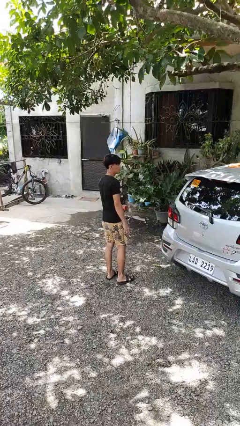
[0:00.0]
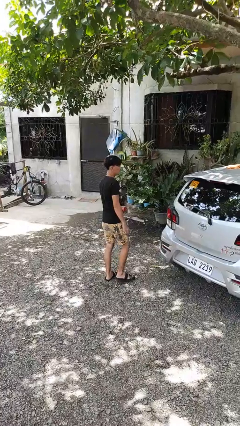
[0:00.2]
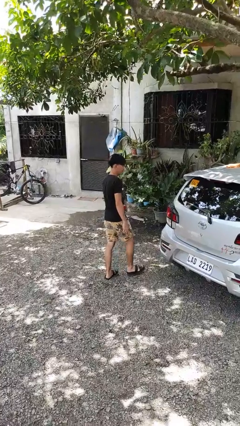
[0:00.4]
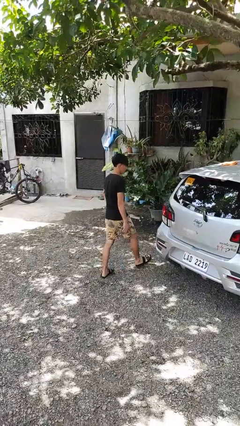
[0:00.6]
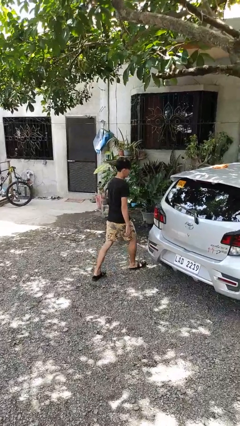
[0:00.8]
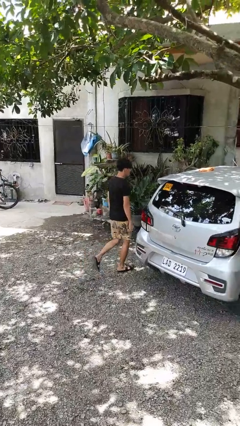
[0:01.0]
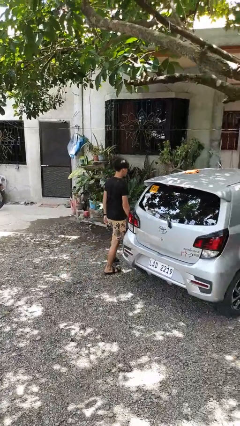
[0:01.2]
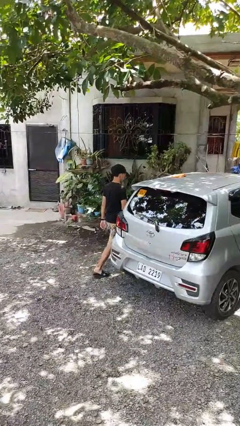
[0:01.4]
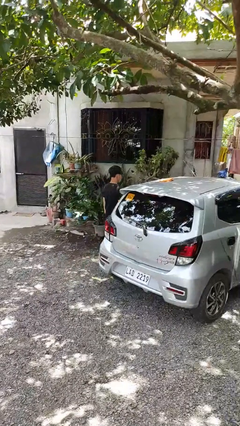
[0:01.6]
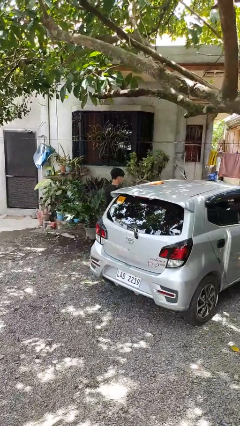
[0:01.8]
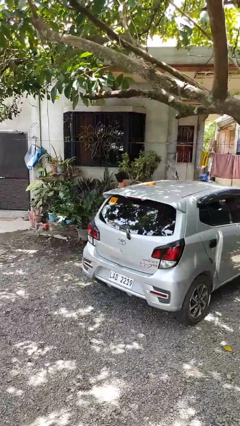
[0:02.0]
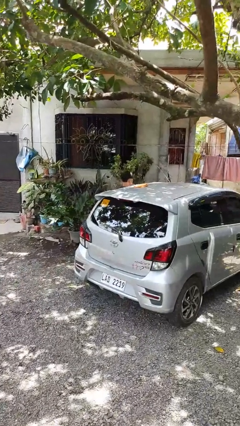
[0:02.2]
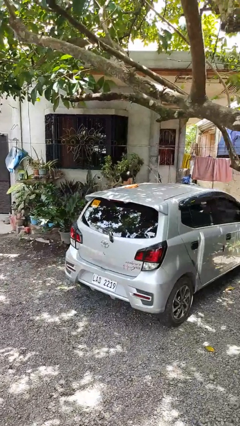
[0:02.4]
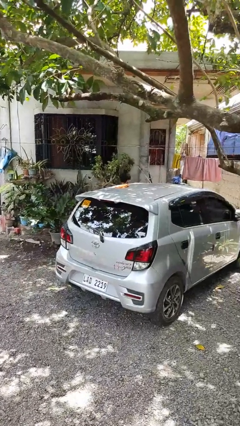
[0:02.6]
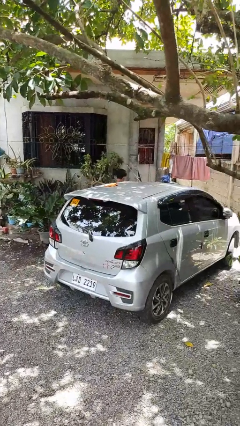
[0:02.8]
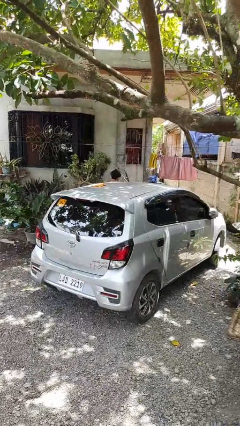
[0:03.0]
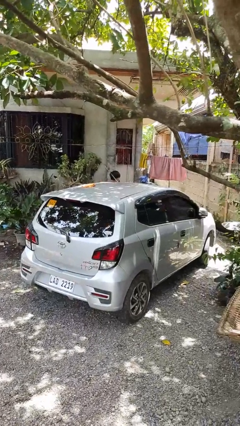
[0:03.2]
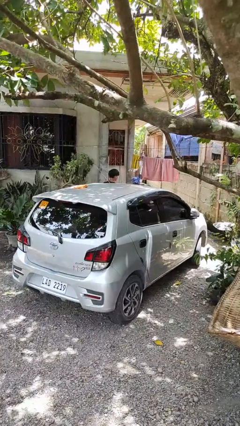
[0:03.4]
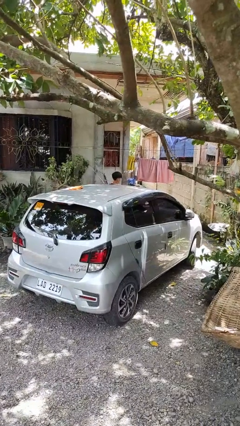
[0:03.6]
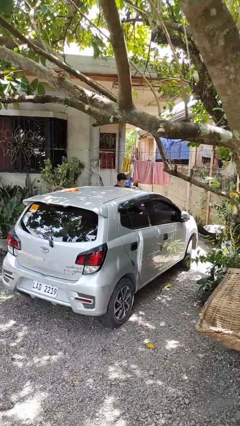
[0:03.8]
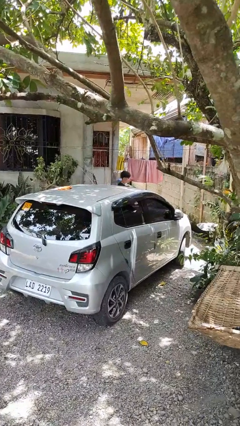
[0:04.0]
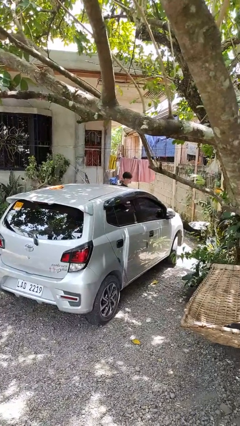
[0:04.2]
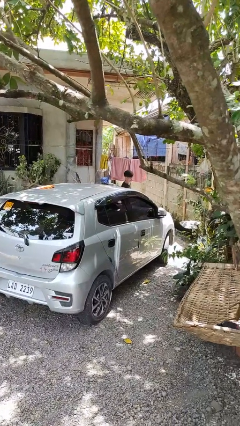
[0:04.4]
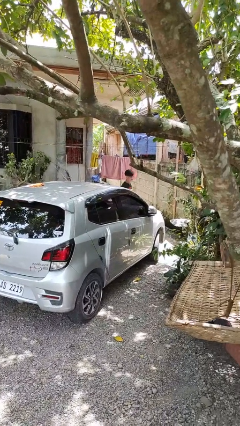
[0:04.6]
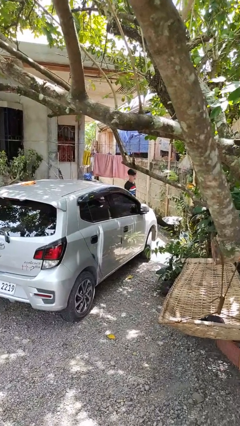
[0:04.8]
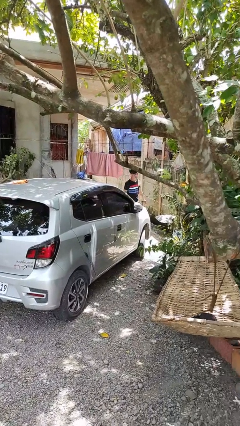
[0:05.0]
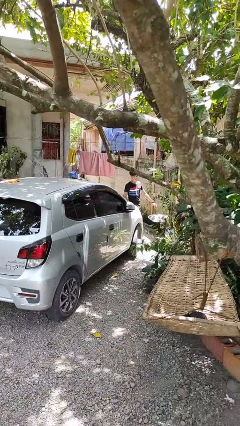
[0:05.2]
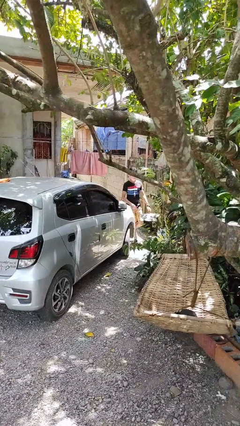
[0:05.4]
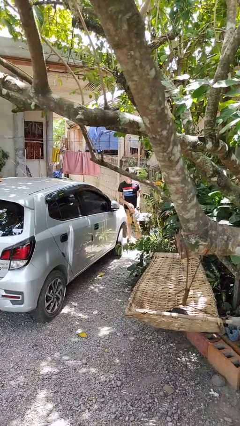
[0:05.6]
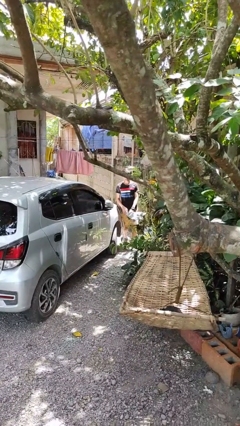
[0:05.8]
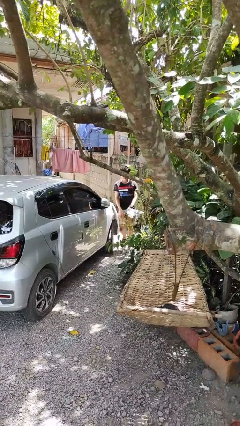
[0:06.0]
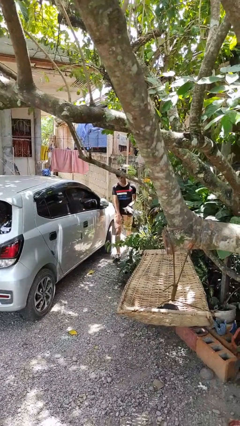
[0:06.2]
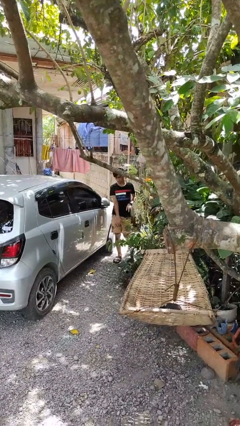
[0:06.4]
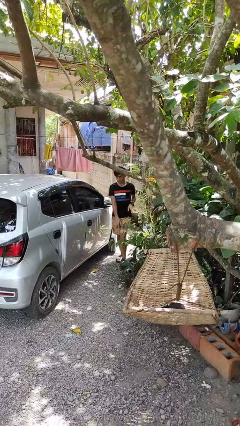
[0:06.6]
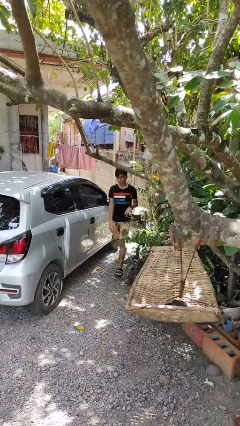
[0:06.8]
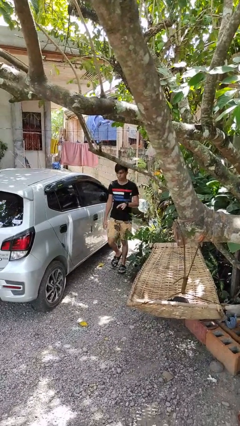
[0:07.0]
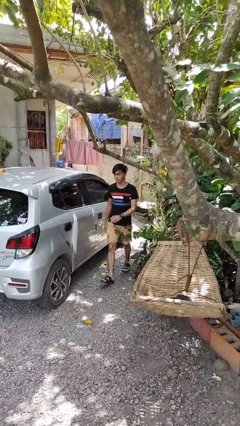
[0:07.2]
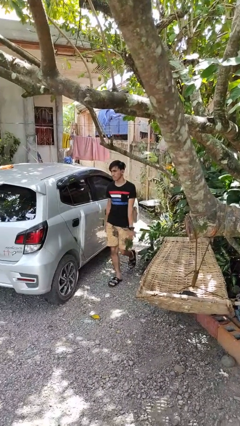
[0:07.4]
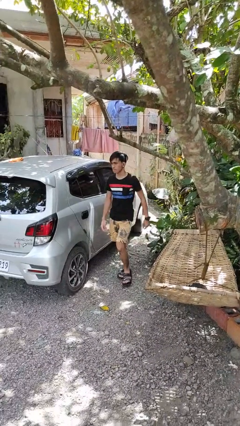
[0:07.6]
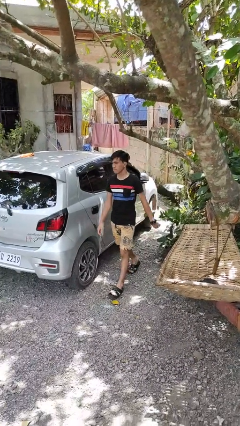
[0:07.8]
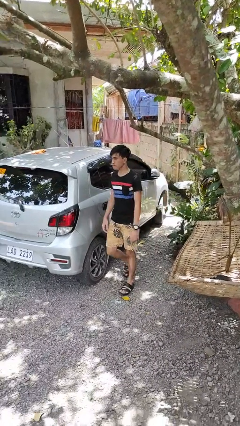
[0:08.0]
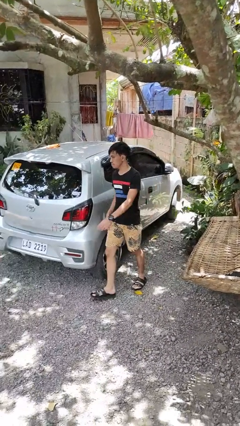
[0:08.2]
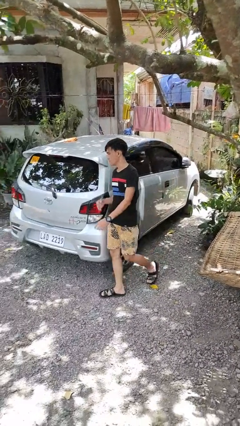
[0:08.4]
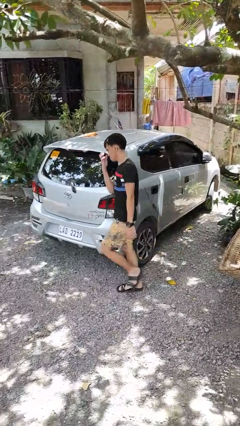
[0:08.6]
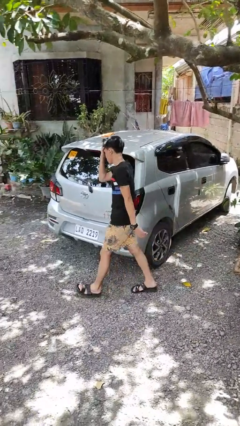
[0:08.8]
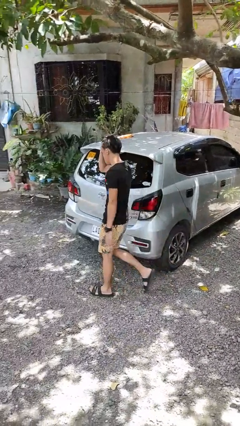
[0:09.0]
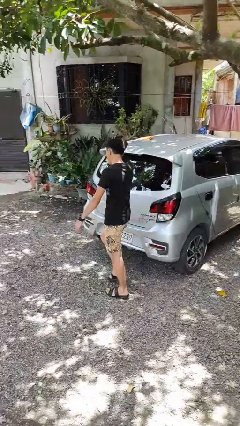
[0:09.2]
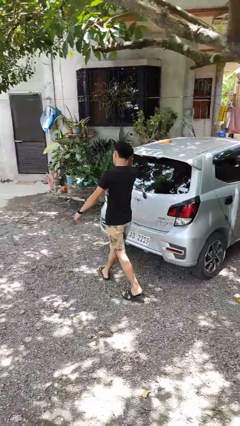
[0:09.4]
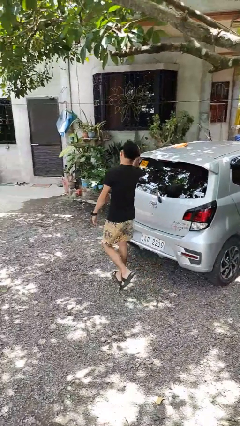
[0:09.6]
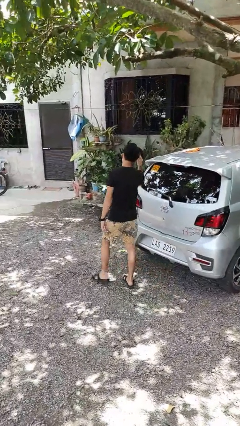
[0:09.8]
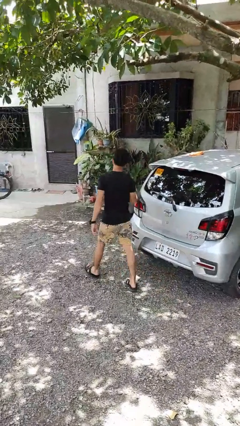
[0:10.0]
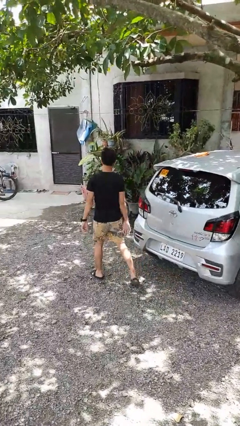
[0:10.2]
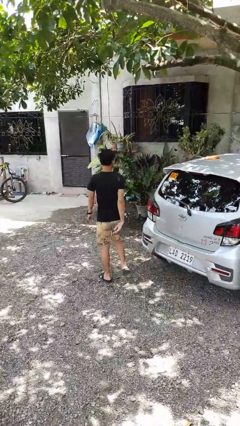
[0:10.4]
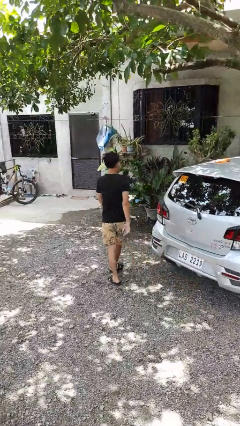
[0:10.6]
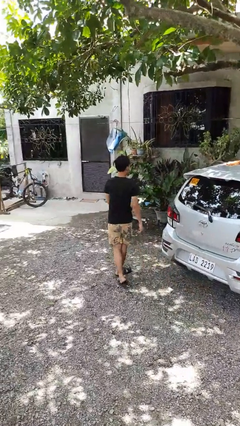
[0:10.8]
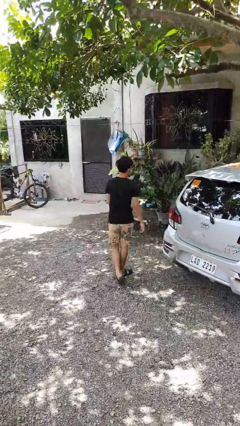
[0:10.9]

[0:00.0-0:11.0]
person walks around car

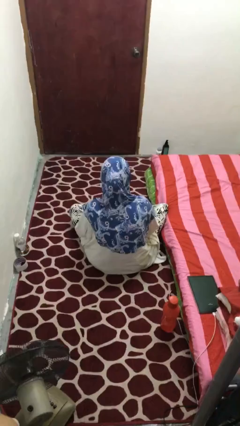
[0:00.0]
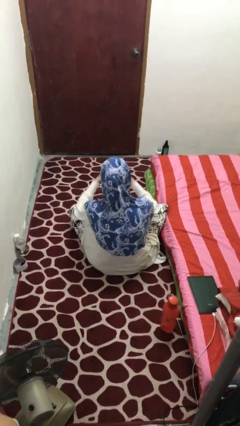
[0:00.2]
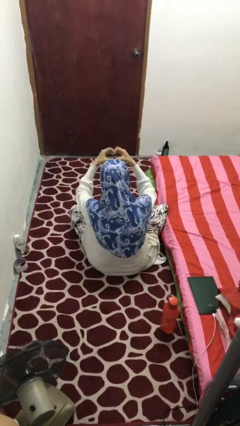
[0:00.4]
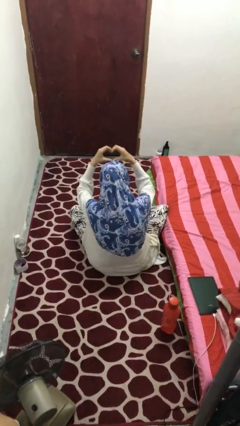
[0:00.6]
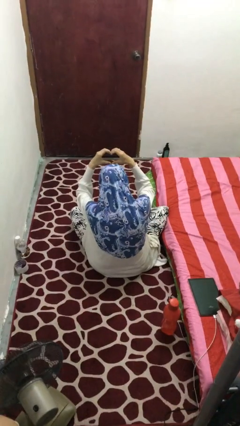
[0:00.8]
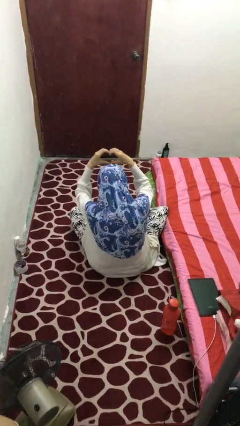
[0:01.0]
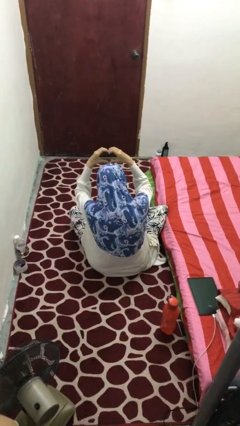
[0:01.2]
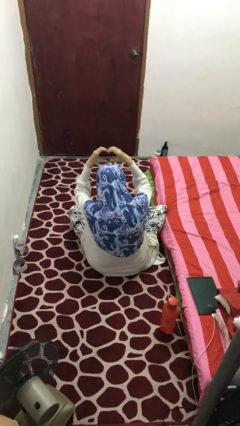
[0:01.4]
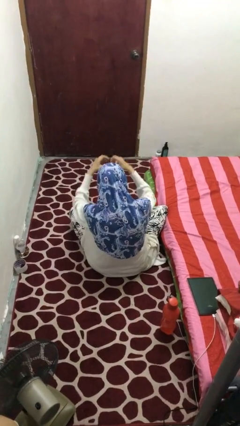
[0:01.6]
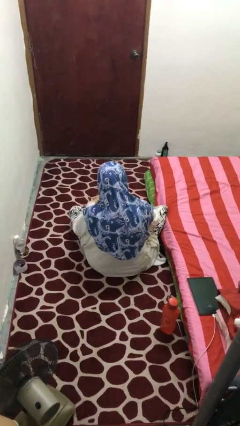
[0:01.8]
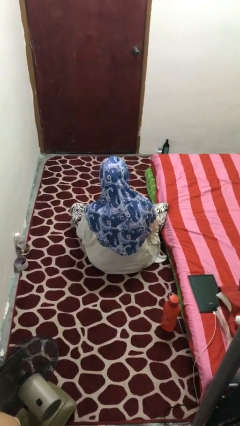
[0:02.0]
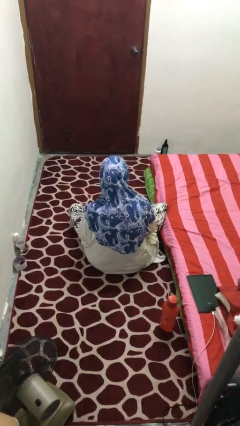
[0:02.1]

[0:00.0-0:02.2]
person gestures heart

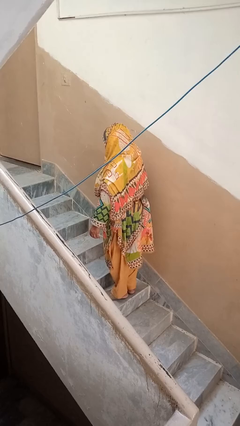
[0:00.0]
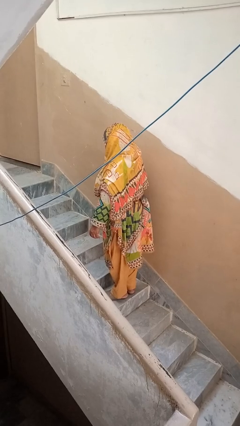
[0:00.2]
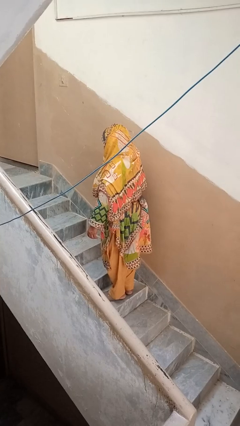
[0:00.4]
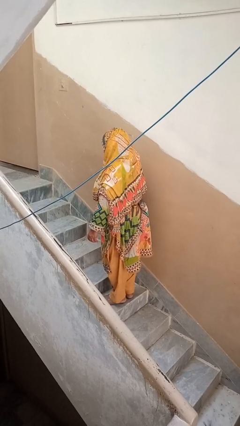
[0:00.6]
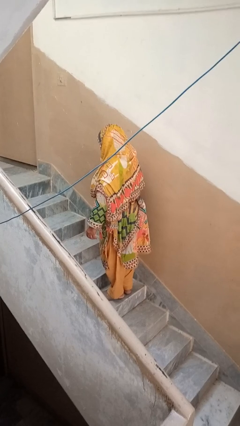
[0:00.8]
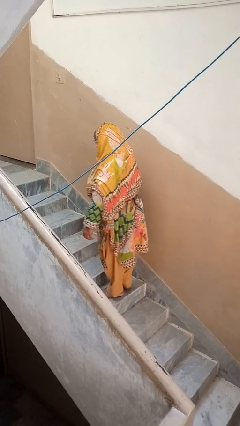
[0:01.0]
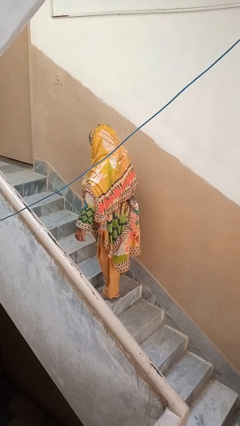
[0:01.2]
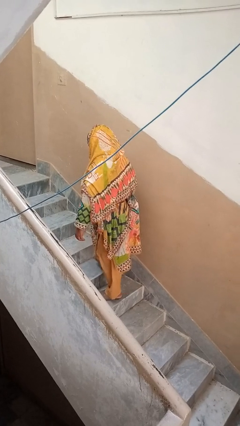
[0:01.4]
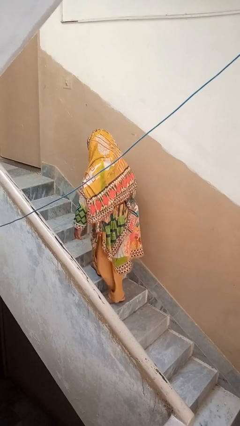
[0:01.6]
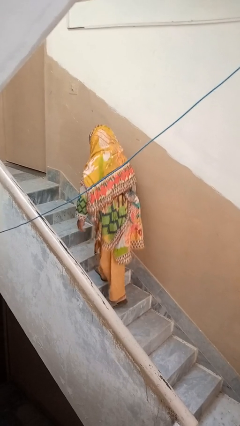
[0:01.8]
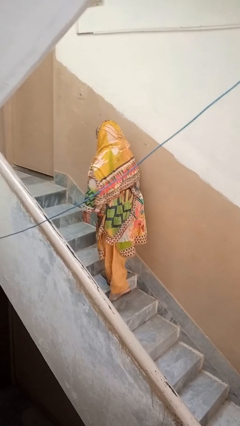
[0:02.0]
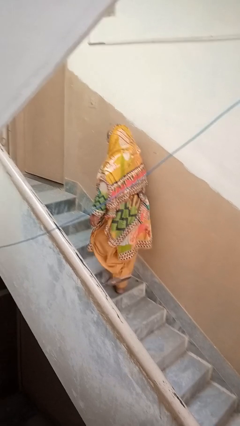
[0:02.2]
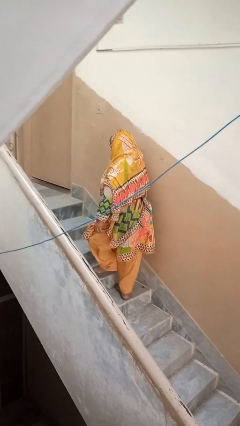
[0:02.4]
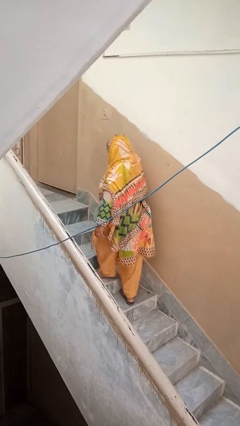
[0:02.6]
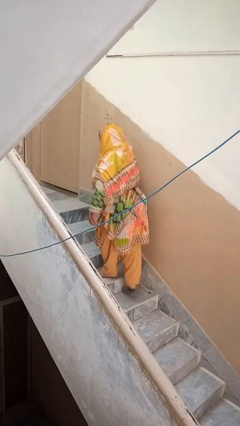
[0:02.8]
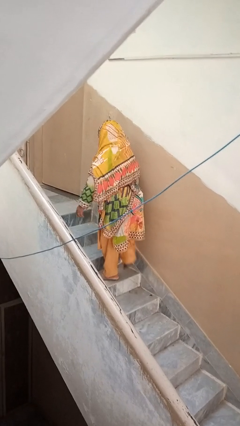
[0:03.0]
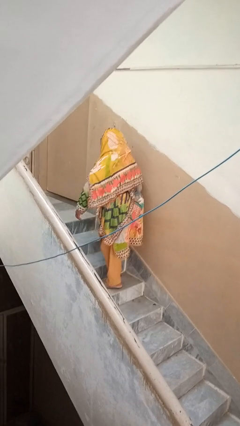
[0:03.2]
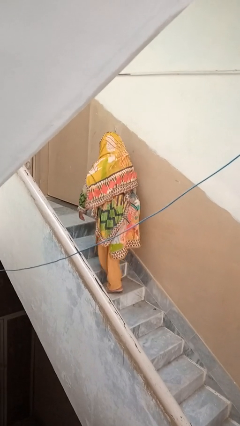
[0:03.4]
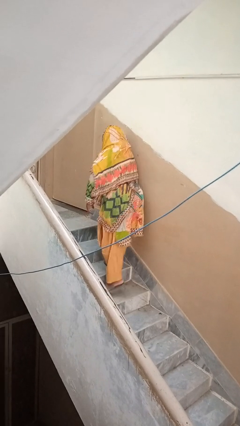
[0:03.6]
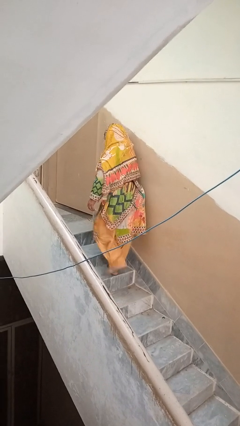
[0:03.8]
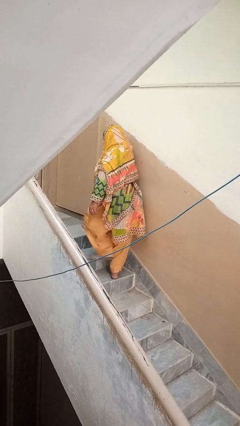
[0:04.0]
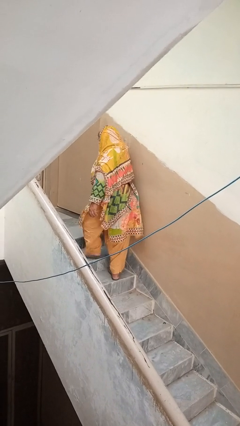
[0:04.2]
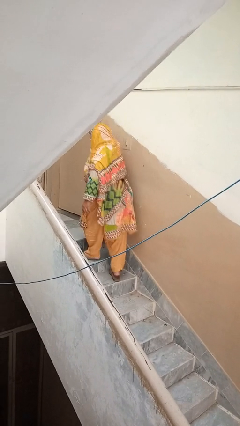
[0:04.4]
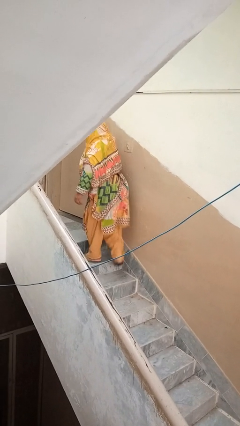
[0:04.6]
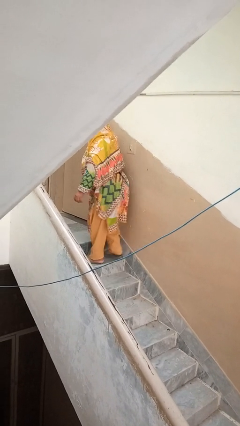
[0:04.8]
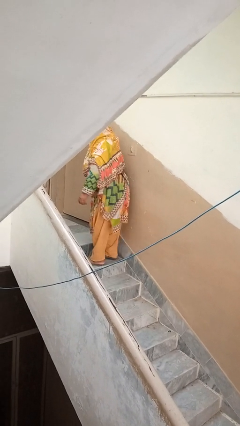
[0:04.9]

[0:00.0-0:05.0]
person climbs up stairs
